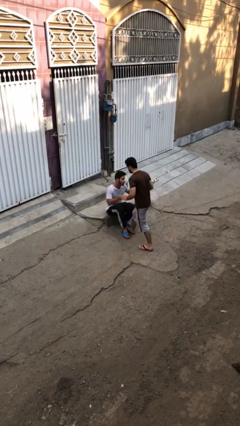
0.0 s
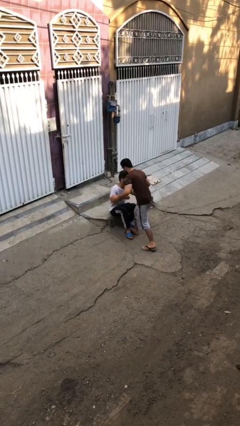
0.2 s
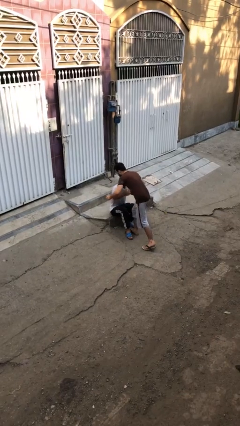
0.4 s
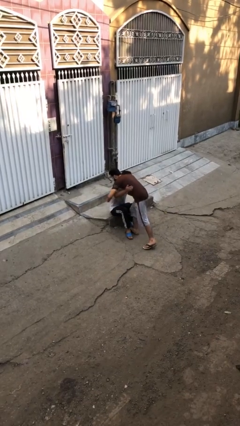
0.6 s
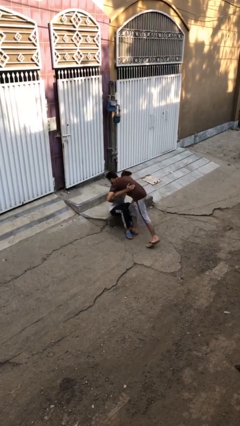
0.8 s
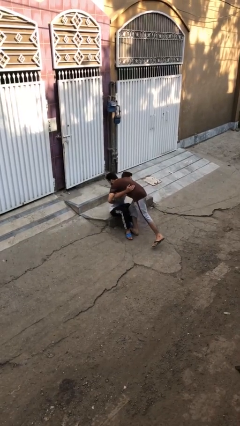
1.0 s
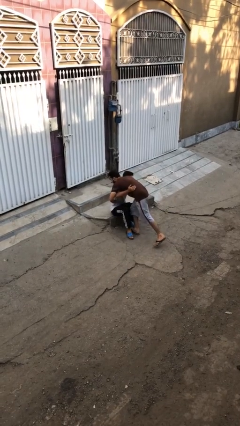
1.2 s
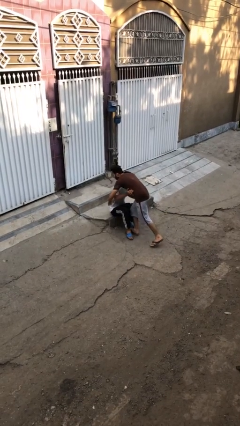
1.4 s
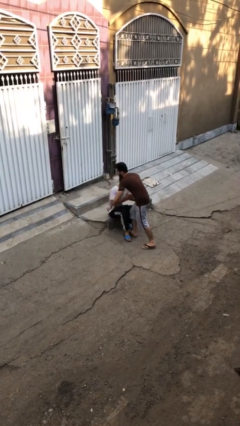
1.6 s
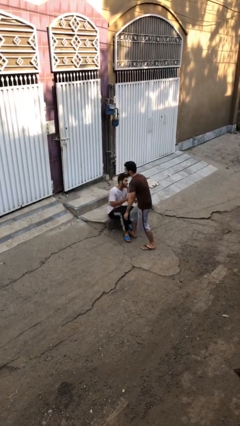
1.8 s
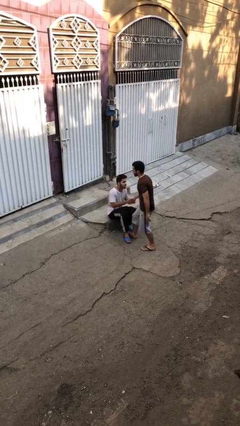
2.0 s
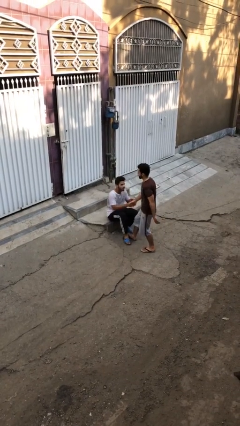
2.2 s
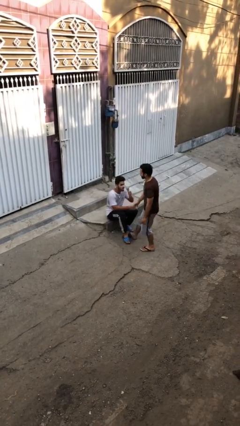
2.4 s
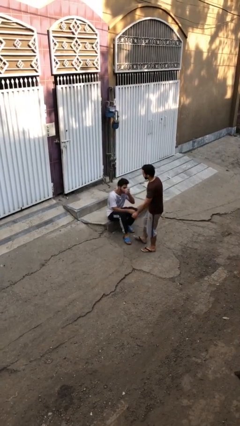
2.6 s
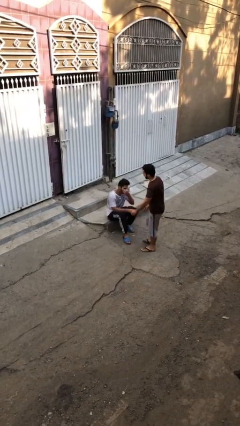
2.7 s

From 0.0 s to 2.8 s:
person embraces person

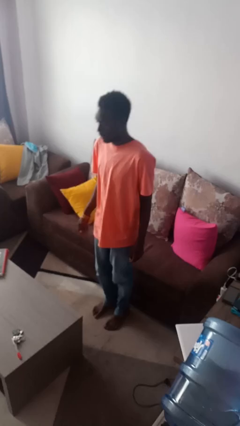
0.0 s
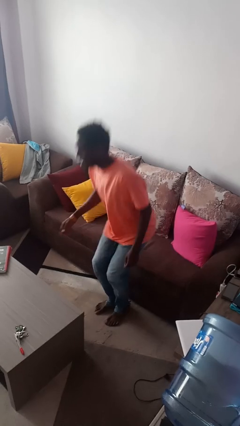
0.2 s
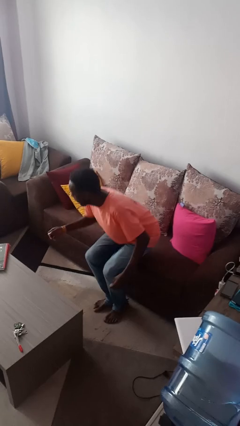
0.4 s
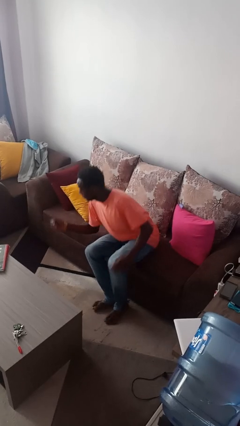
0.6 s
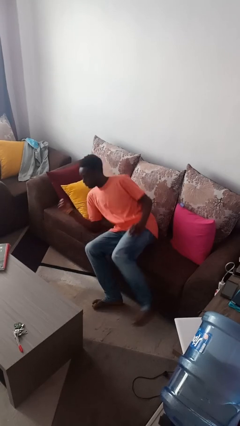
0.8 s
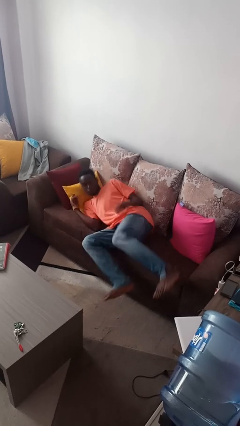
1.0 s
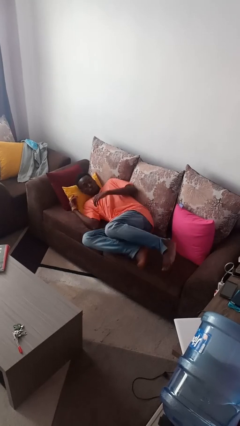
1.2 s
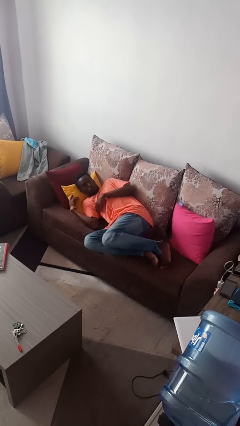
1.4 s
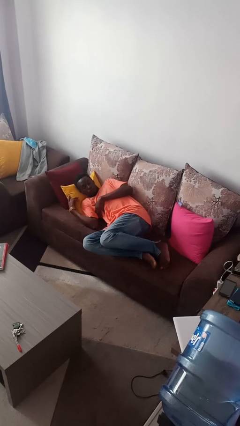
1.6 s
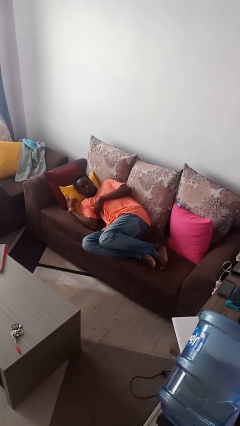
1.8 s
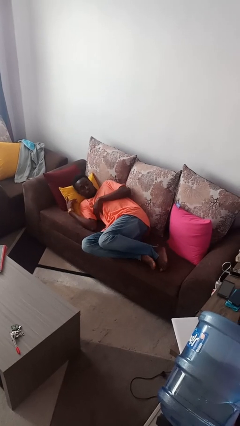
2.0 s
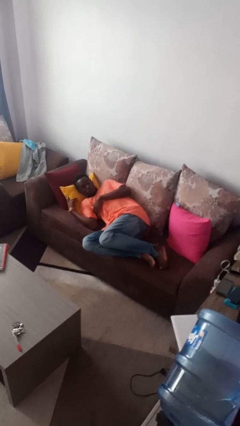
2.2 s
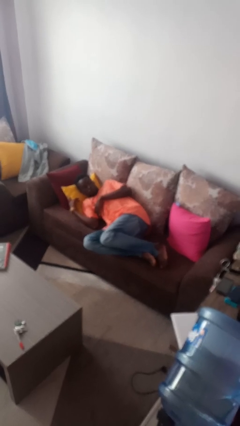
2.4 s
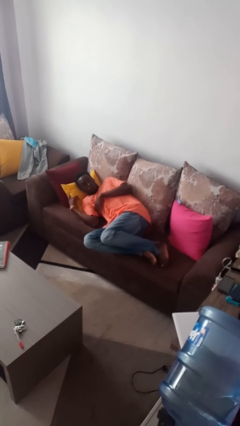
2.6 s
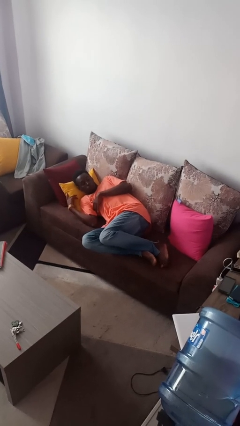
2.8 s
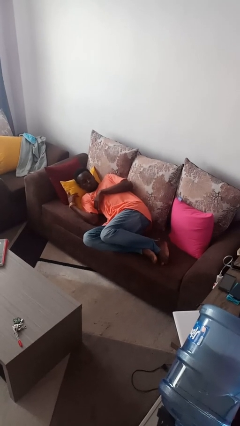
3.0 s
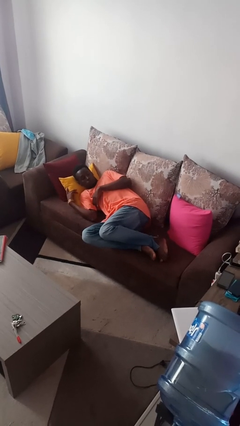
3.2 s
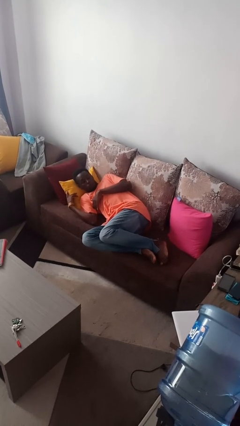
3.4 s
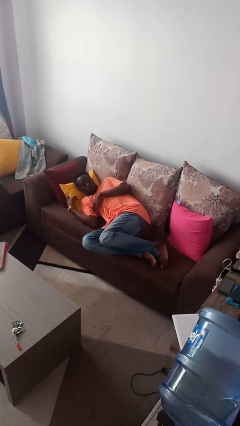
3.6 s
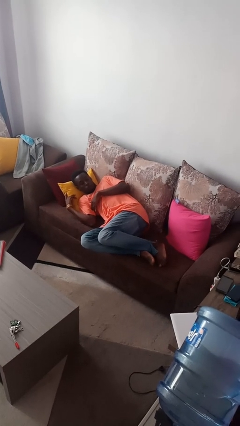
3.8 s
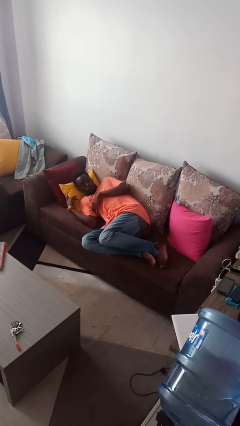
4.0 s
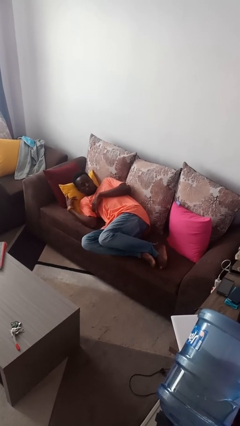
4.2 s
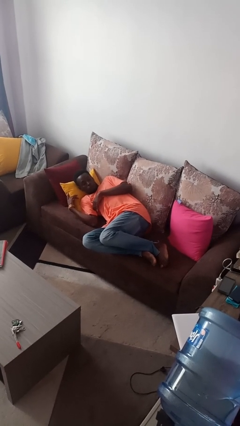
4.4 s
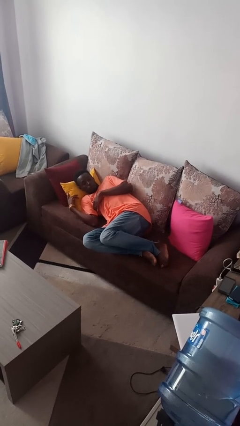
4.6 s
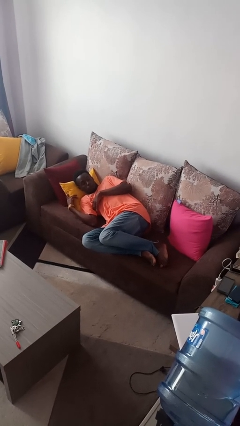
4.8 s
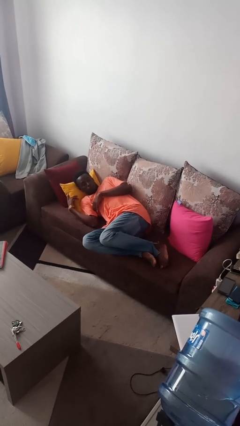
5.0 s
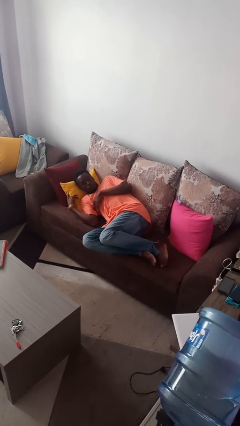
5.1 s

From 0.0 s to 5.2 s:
person lies down on couch

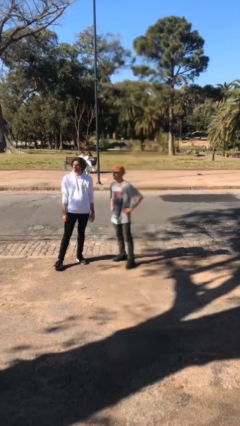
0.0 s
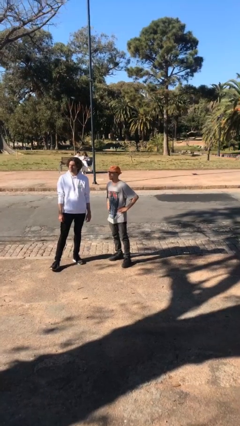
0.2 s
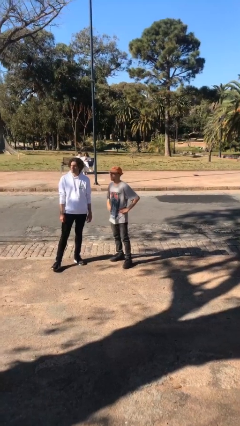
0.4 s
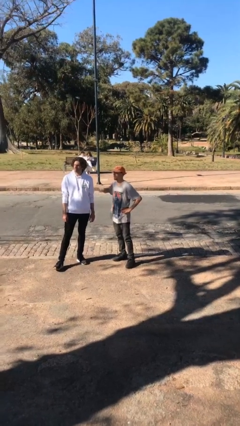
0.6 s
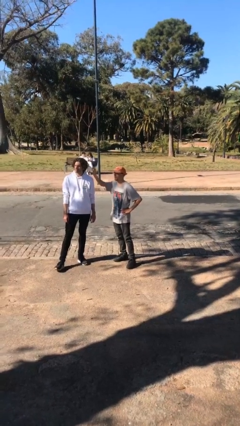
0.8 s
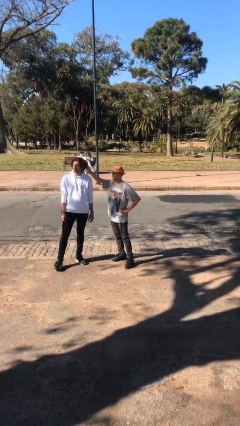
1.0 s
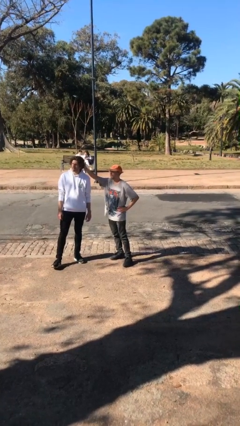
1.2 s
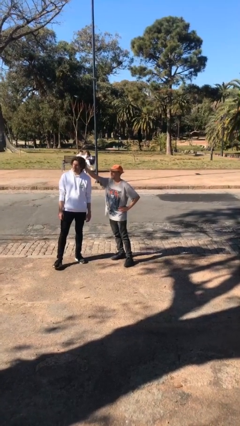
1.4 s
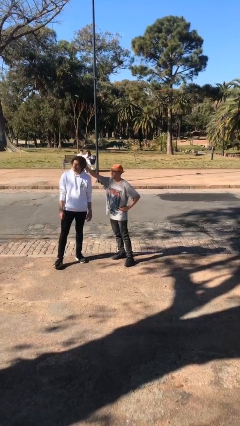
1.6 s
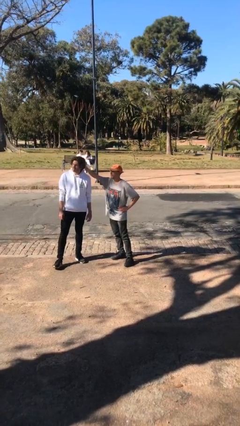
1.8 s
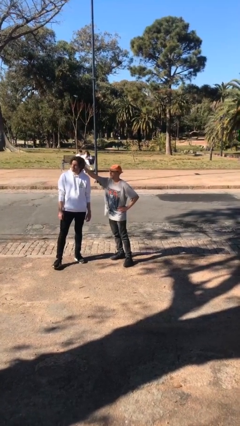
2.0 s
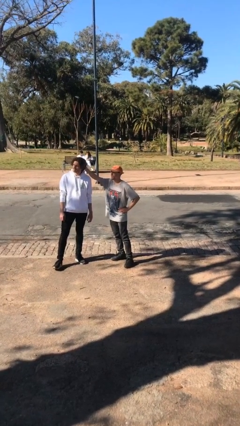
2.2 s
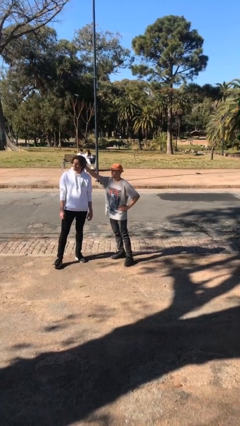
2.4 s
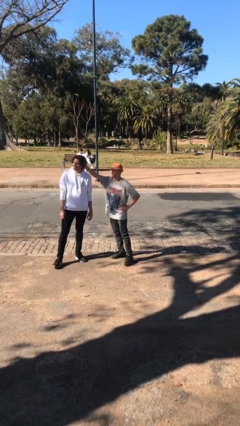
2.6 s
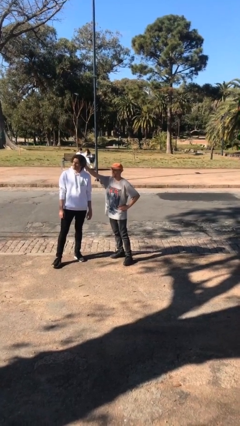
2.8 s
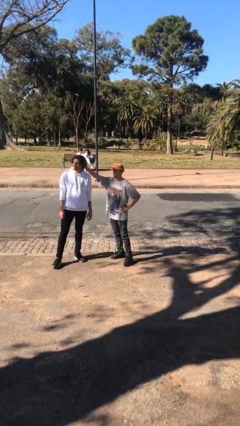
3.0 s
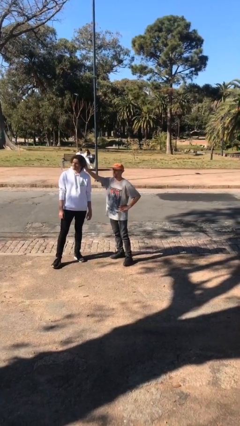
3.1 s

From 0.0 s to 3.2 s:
person grabs person by hair

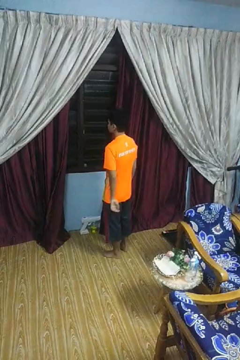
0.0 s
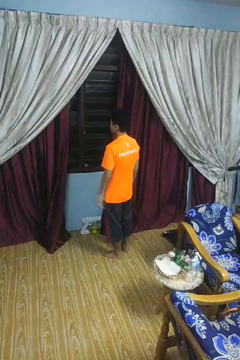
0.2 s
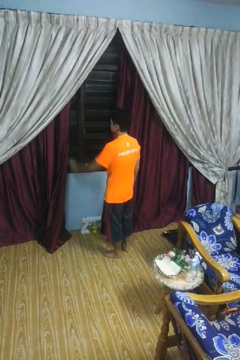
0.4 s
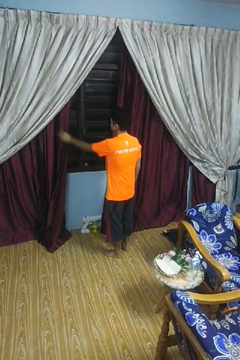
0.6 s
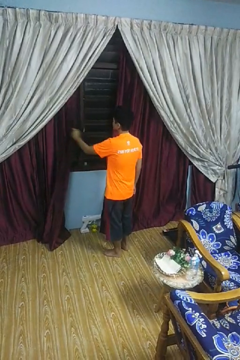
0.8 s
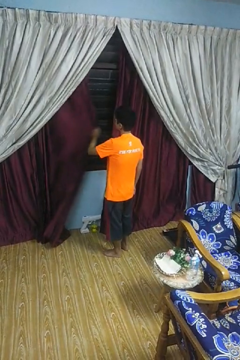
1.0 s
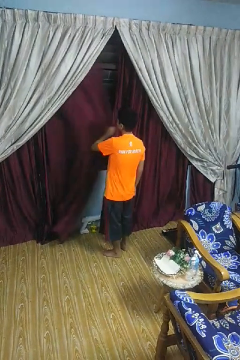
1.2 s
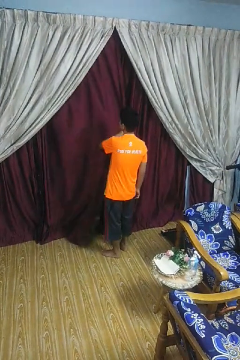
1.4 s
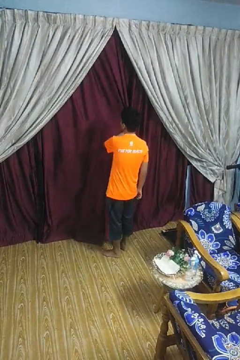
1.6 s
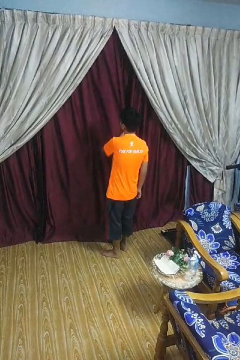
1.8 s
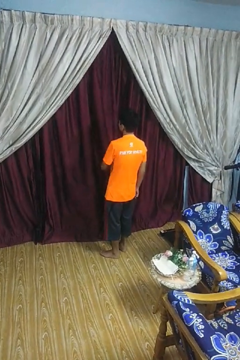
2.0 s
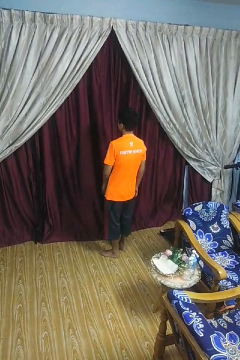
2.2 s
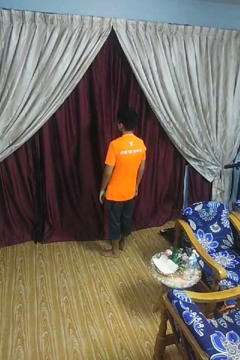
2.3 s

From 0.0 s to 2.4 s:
person closes curtains

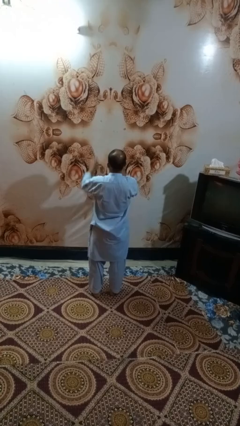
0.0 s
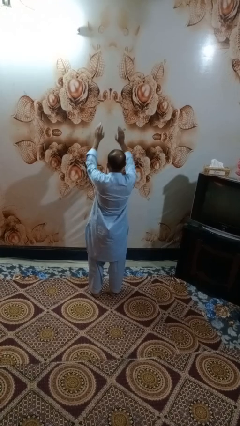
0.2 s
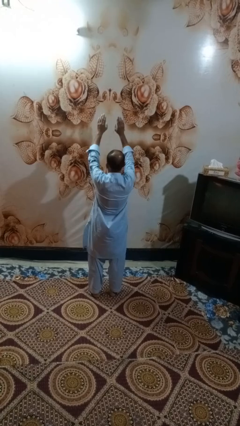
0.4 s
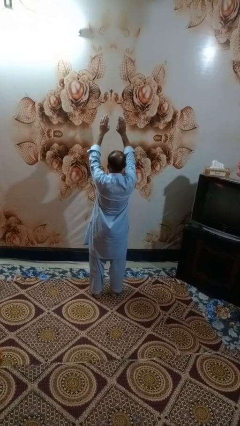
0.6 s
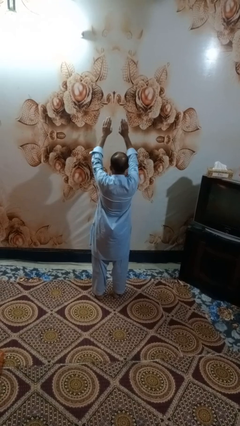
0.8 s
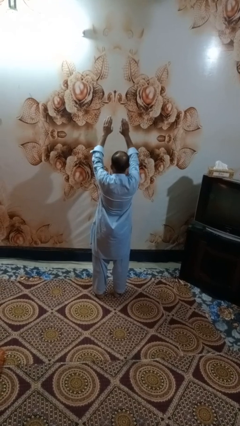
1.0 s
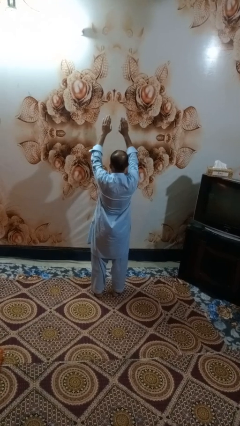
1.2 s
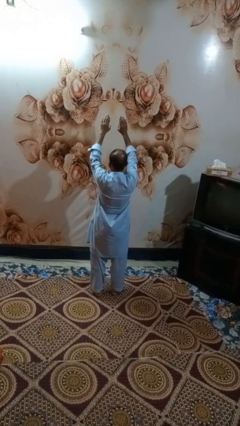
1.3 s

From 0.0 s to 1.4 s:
person gestures swipe up

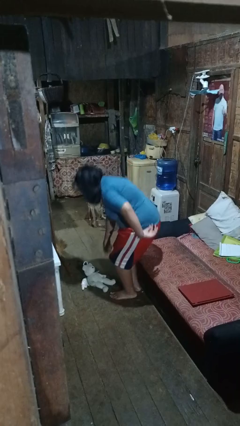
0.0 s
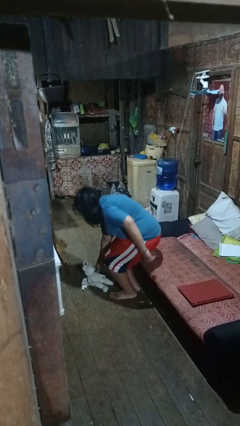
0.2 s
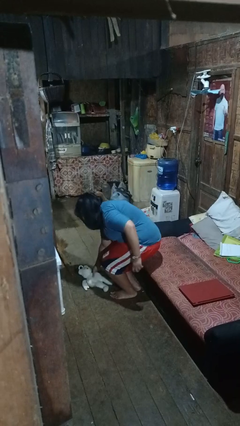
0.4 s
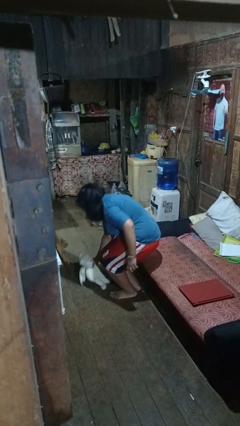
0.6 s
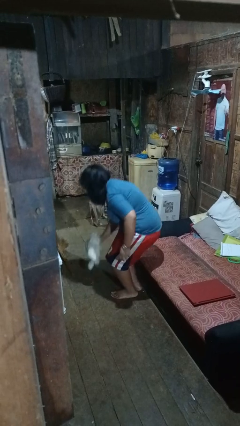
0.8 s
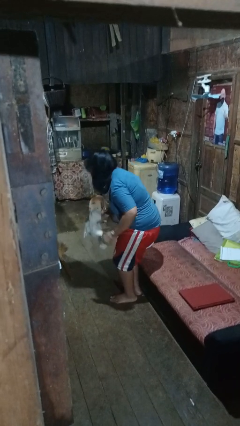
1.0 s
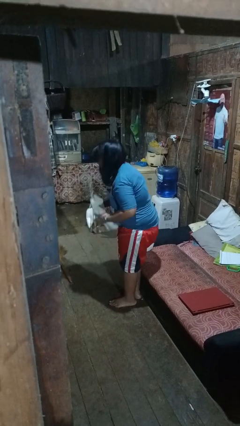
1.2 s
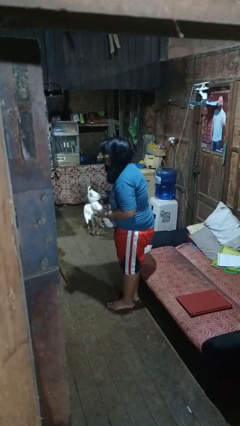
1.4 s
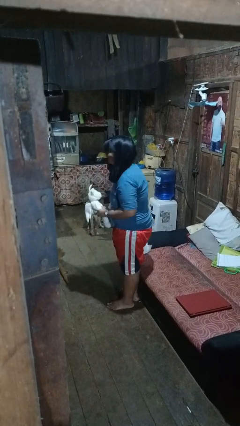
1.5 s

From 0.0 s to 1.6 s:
person picks up object from floor

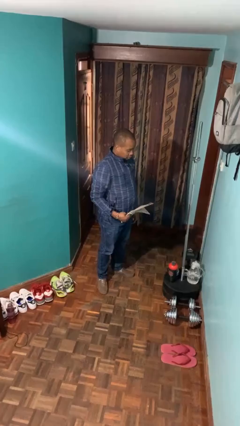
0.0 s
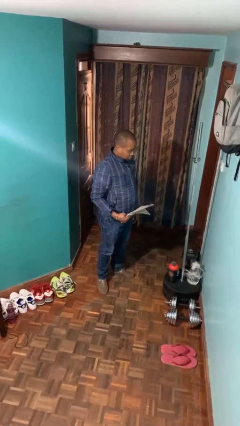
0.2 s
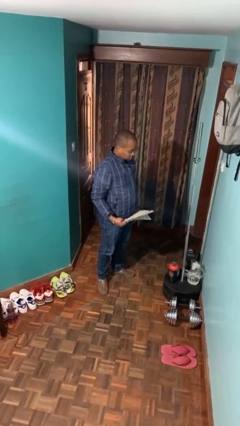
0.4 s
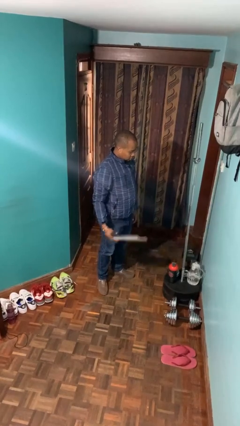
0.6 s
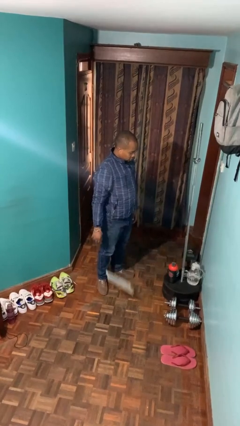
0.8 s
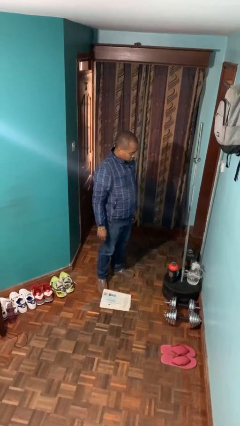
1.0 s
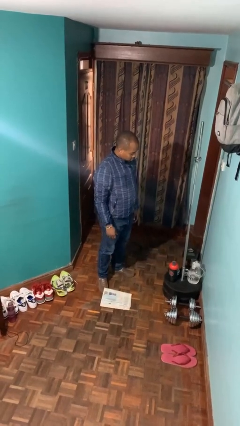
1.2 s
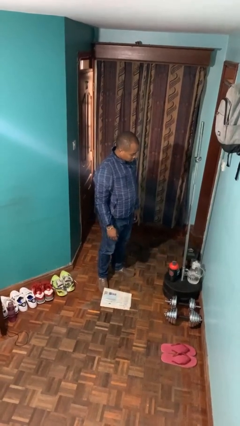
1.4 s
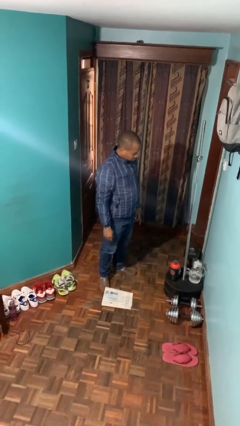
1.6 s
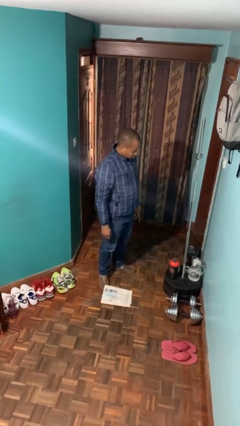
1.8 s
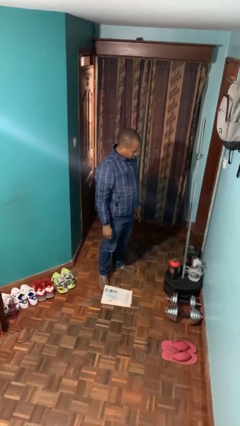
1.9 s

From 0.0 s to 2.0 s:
person drops object
